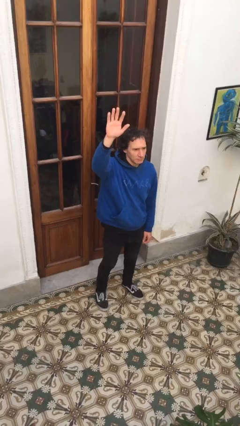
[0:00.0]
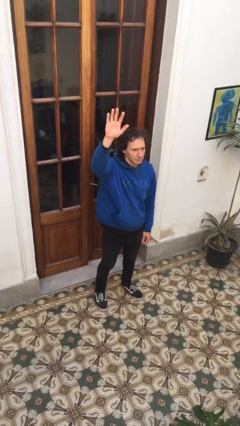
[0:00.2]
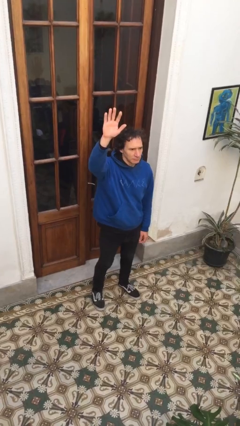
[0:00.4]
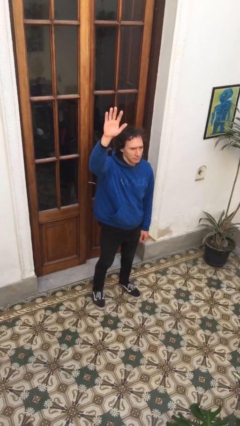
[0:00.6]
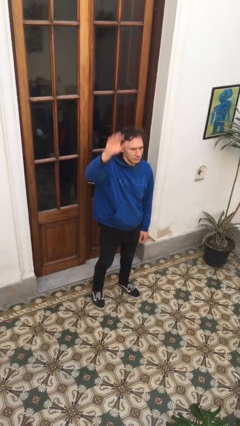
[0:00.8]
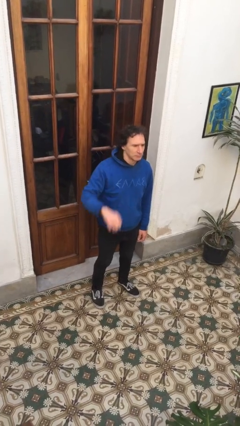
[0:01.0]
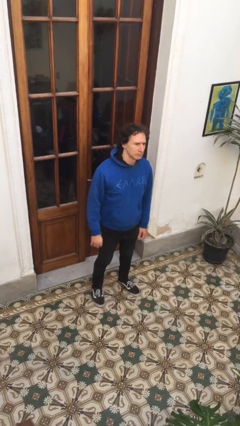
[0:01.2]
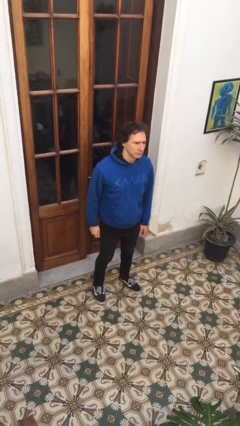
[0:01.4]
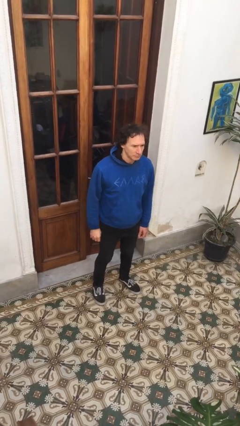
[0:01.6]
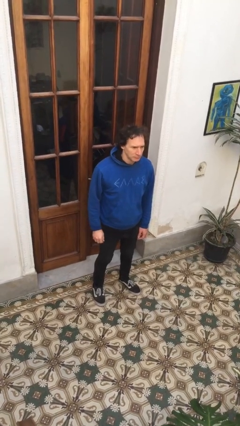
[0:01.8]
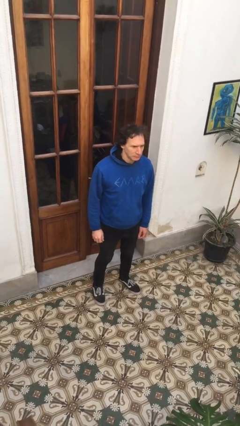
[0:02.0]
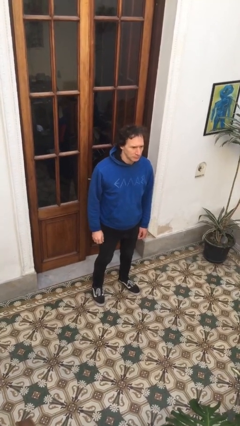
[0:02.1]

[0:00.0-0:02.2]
person gestures lower hand

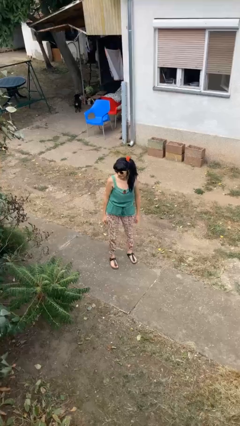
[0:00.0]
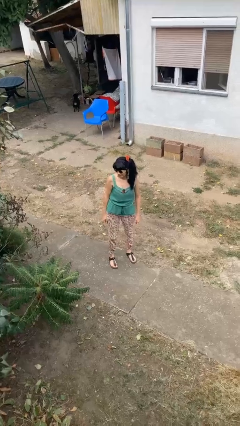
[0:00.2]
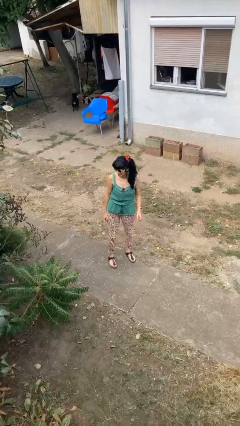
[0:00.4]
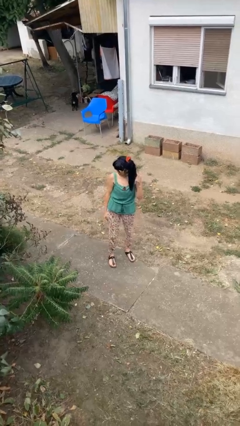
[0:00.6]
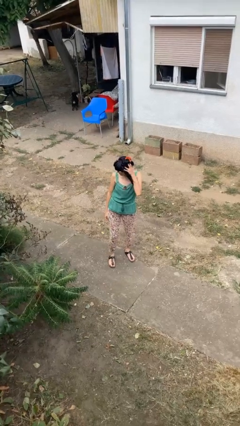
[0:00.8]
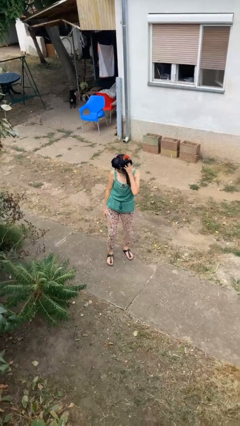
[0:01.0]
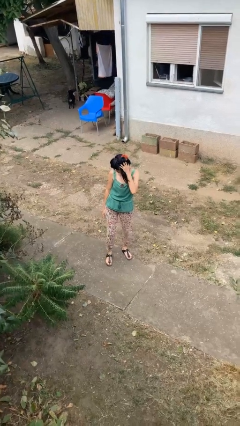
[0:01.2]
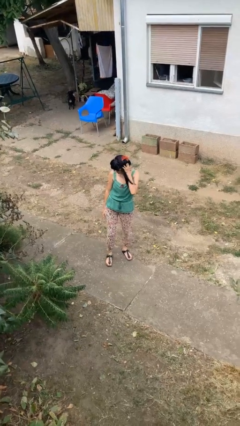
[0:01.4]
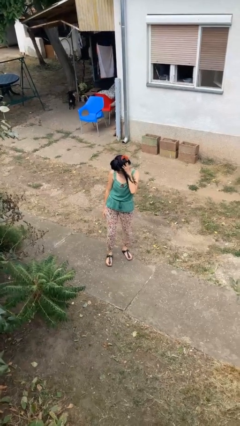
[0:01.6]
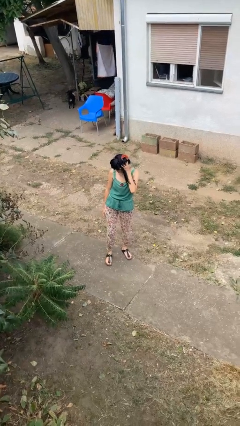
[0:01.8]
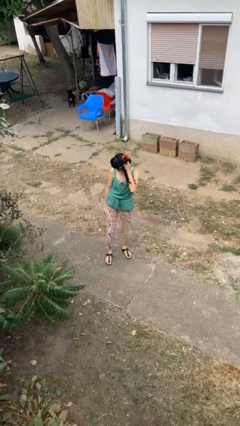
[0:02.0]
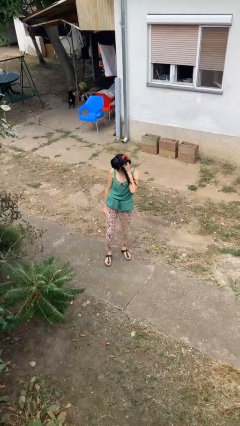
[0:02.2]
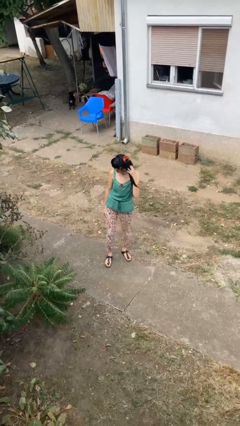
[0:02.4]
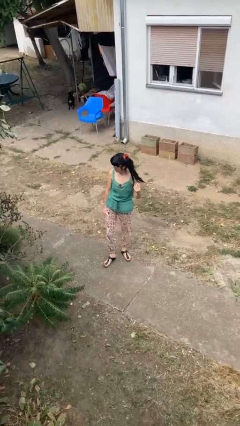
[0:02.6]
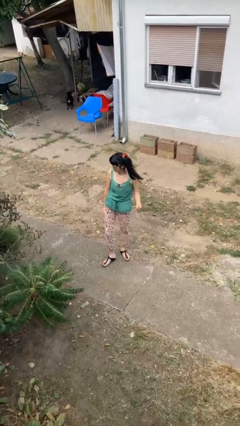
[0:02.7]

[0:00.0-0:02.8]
person scratches face

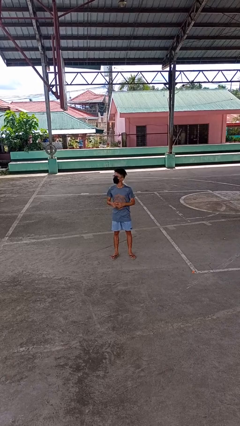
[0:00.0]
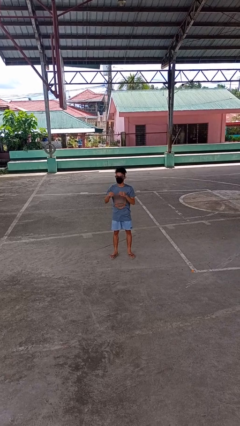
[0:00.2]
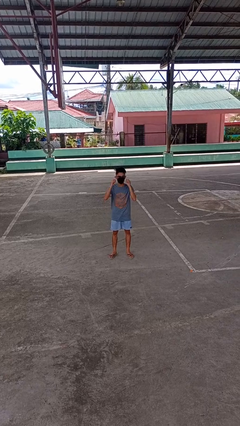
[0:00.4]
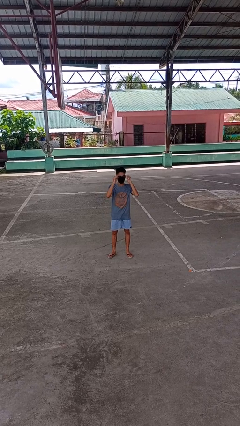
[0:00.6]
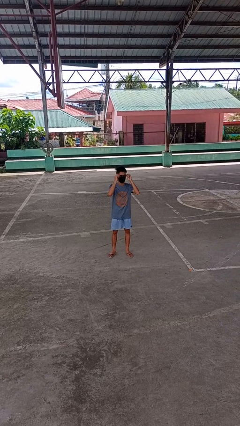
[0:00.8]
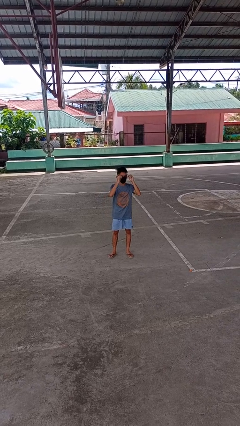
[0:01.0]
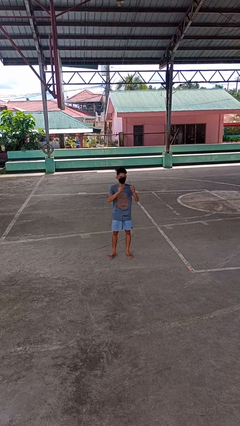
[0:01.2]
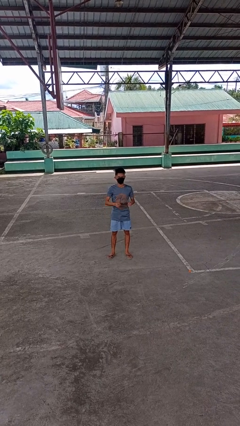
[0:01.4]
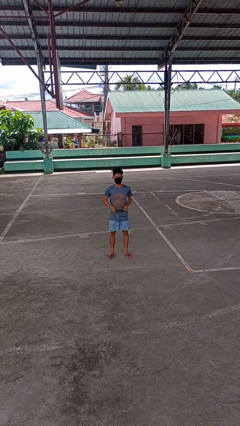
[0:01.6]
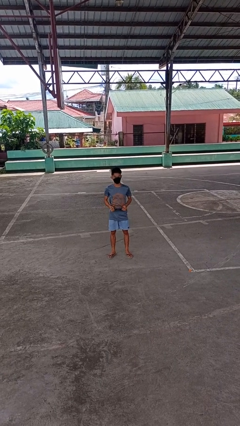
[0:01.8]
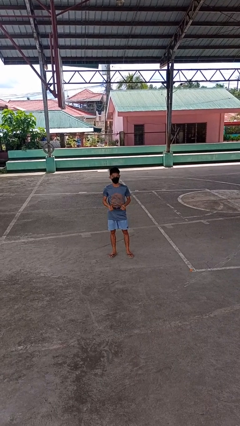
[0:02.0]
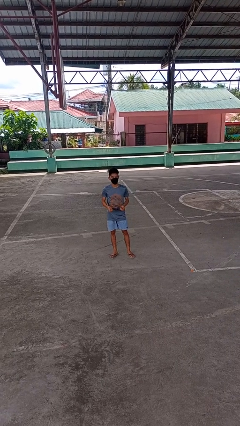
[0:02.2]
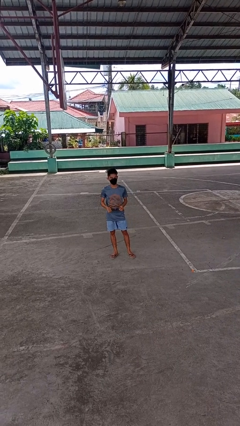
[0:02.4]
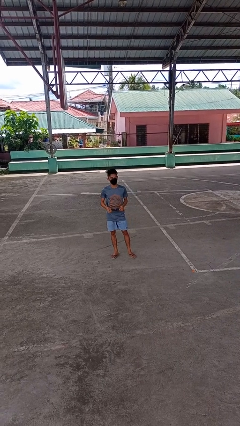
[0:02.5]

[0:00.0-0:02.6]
person takes off glasses

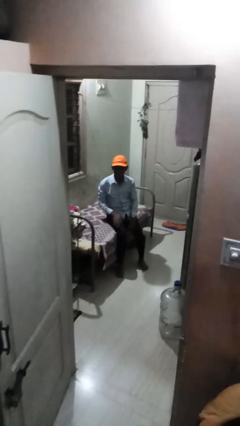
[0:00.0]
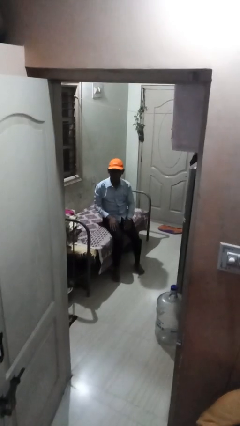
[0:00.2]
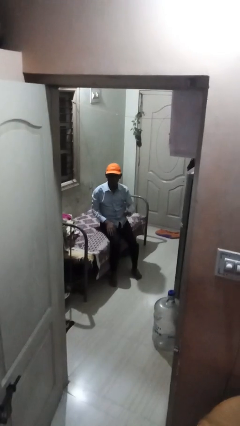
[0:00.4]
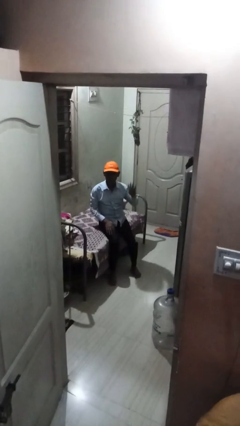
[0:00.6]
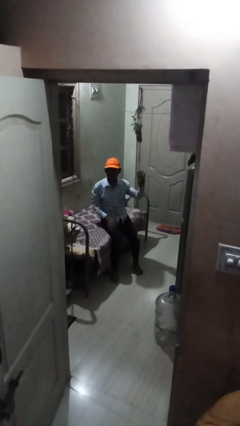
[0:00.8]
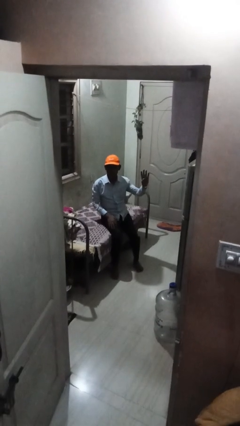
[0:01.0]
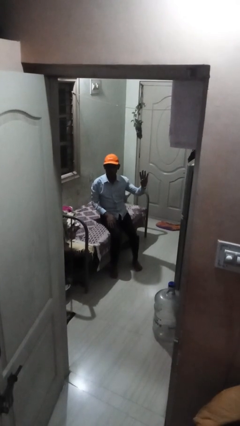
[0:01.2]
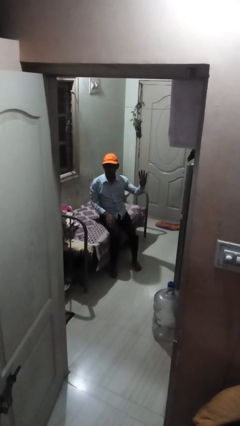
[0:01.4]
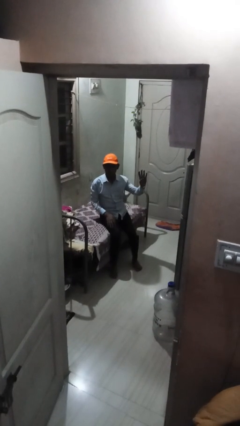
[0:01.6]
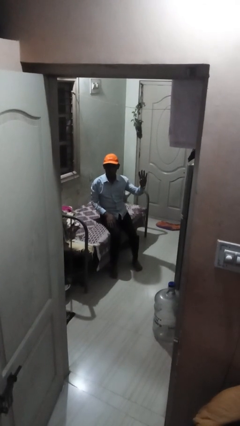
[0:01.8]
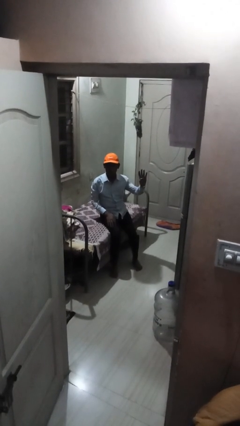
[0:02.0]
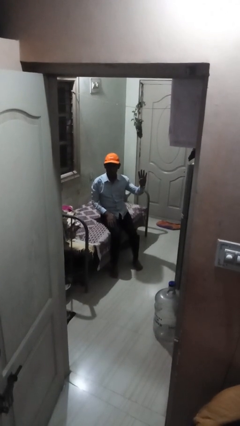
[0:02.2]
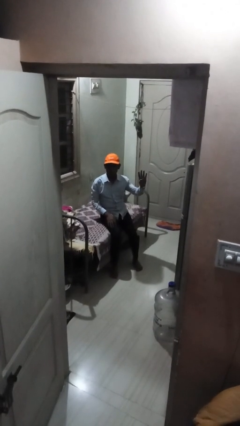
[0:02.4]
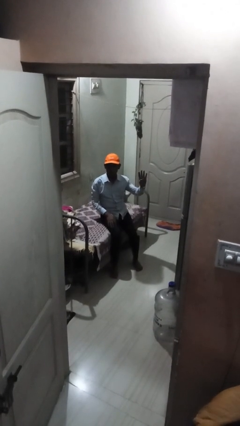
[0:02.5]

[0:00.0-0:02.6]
person gestures number four

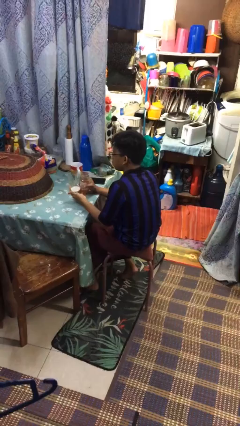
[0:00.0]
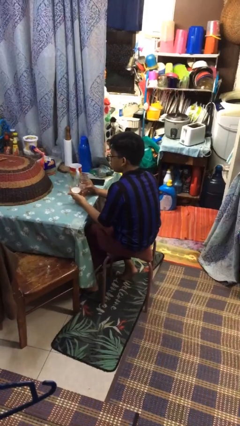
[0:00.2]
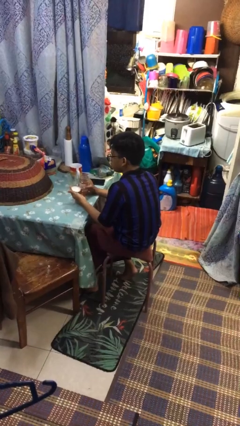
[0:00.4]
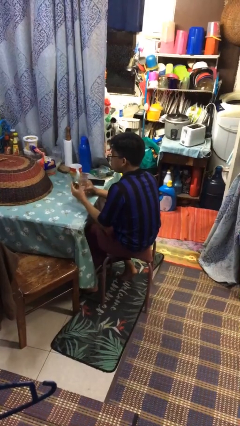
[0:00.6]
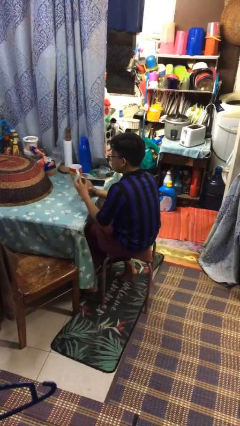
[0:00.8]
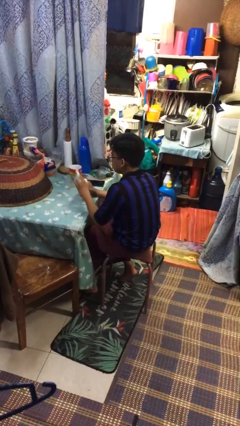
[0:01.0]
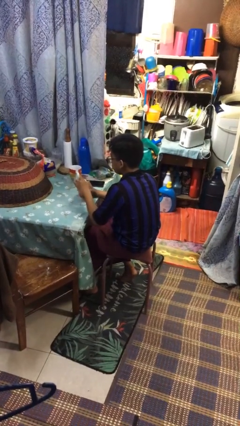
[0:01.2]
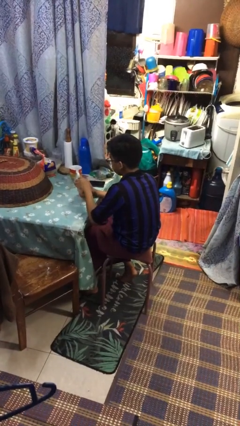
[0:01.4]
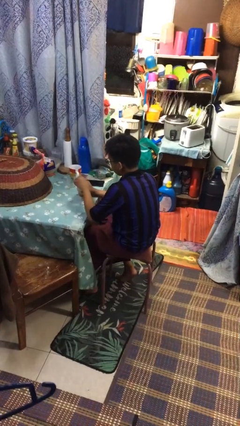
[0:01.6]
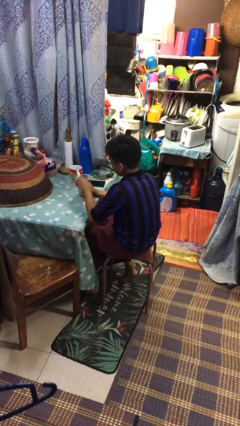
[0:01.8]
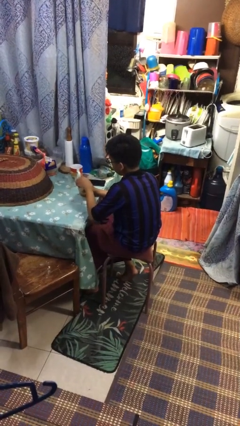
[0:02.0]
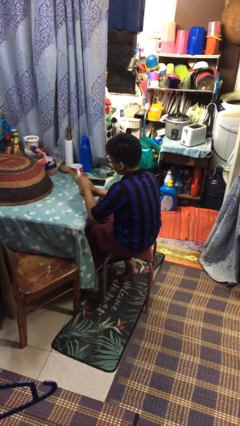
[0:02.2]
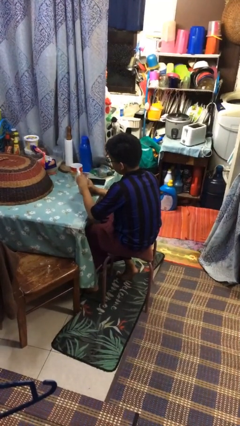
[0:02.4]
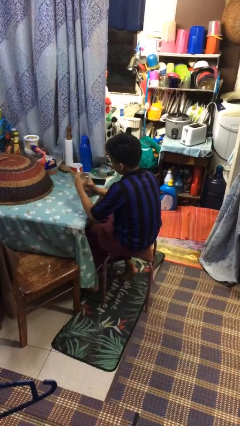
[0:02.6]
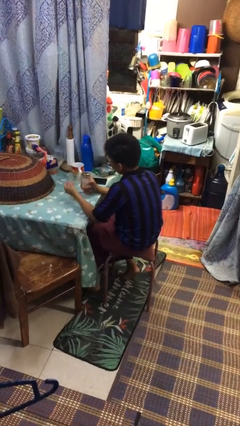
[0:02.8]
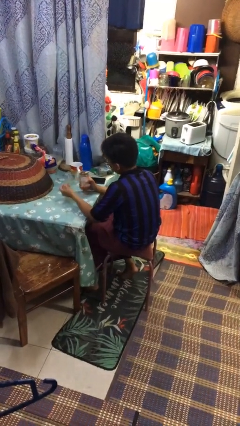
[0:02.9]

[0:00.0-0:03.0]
person closes jar

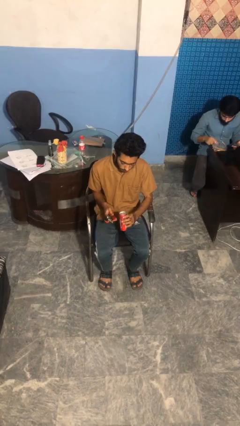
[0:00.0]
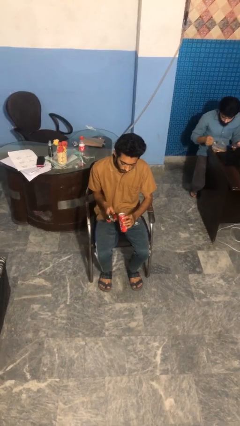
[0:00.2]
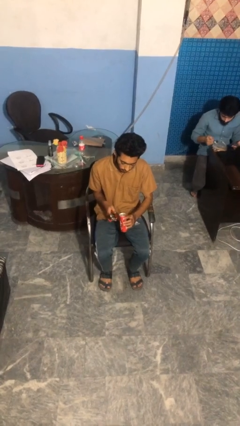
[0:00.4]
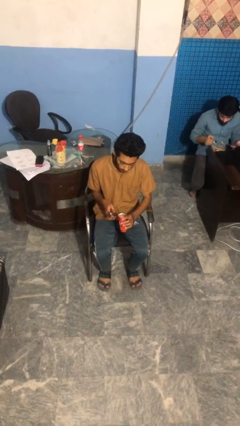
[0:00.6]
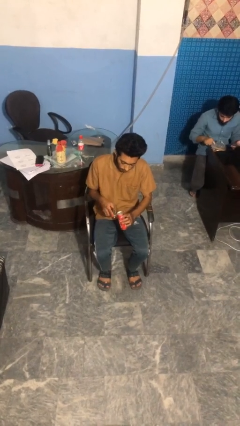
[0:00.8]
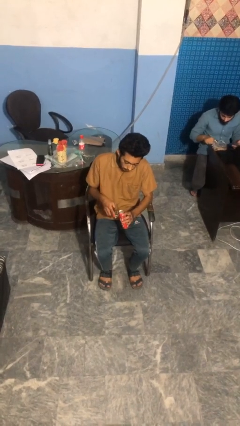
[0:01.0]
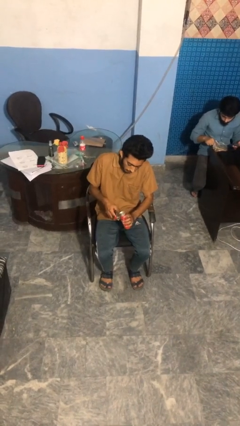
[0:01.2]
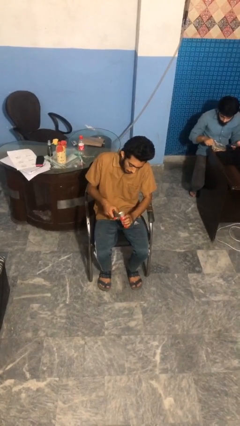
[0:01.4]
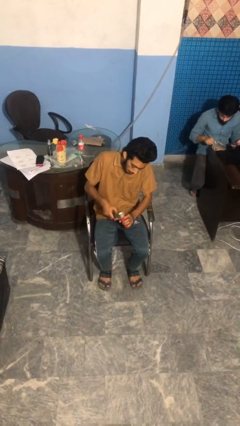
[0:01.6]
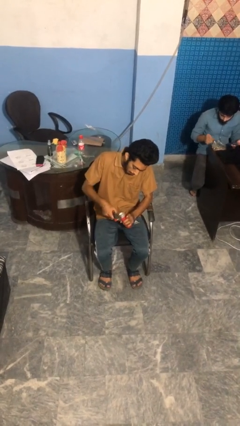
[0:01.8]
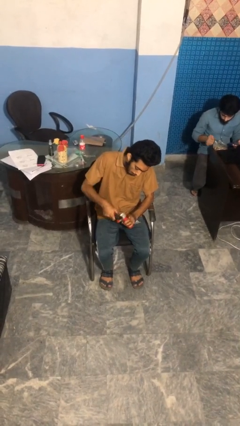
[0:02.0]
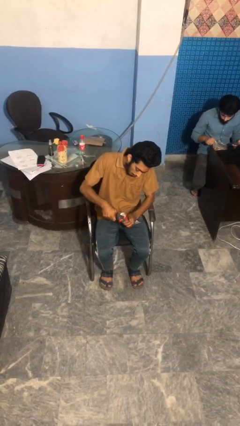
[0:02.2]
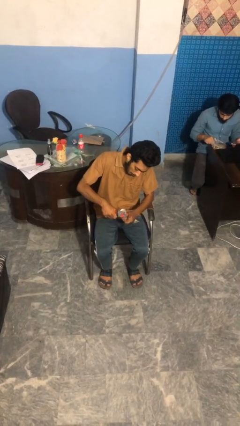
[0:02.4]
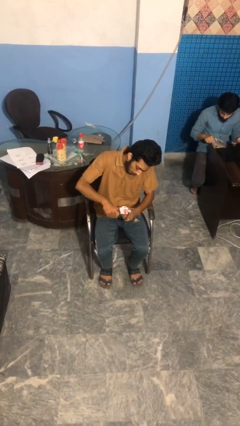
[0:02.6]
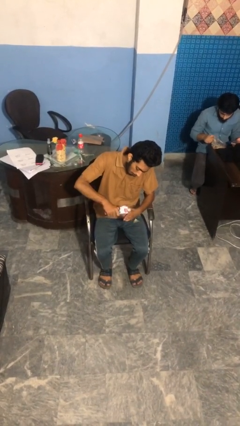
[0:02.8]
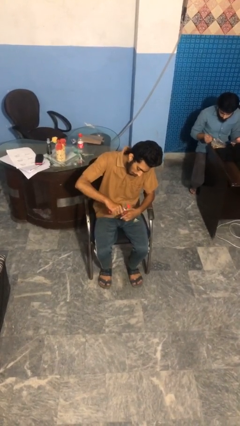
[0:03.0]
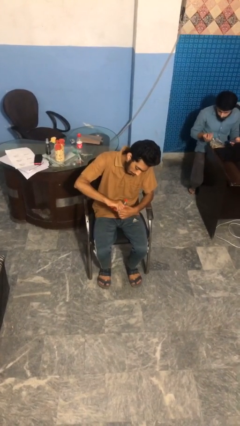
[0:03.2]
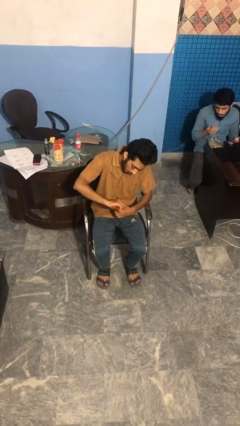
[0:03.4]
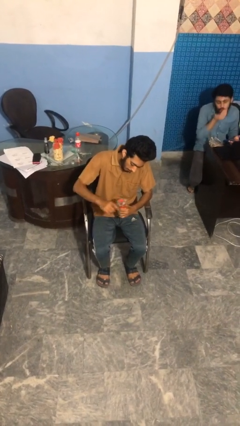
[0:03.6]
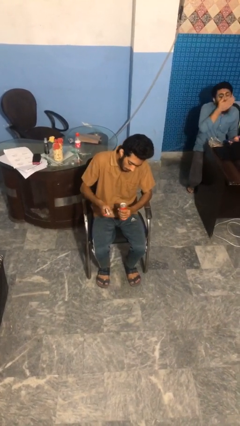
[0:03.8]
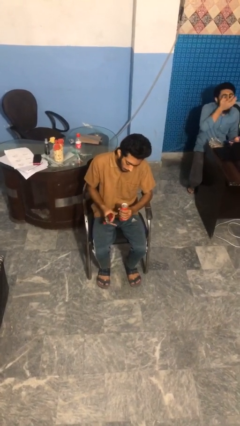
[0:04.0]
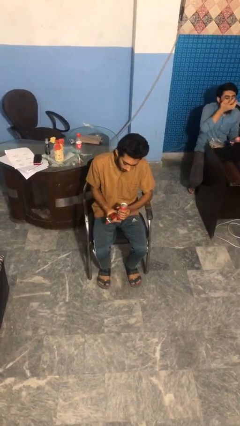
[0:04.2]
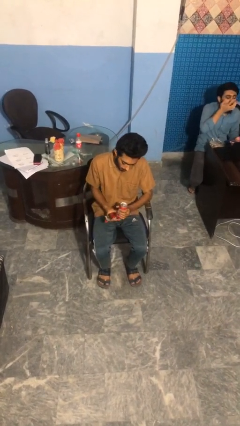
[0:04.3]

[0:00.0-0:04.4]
person opens can with can opener
